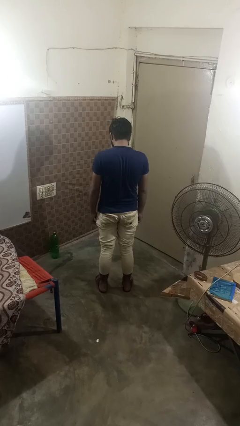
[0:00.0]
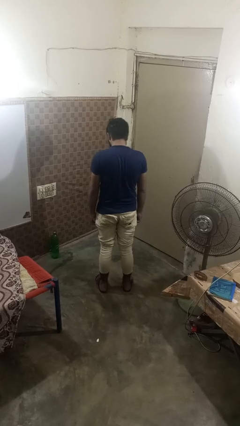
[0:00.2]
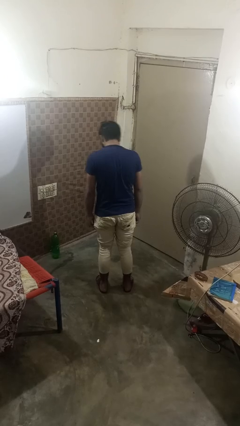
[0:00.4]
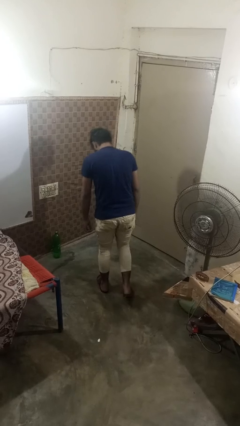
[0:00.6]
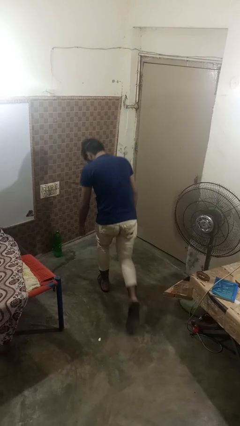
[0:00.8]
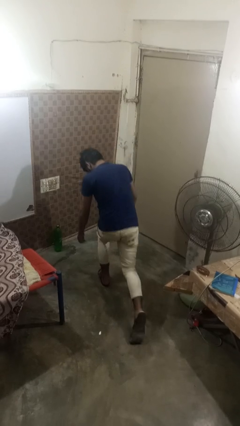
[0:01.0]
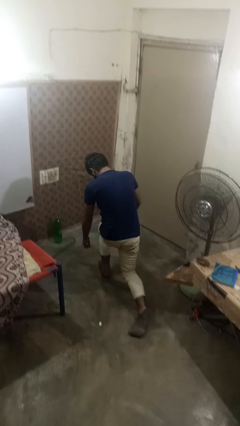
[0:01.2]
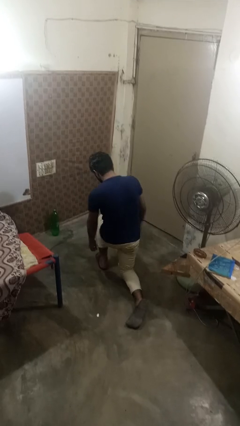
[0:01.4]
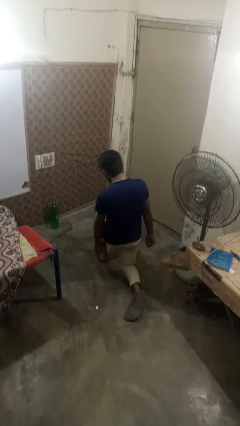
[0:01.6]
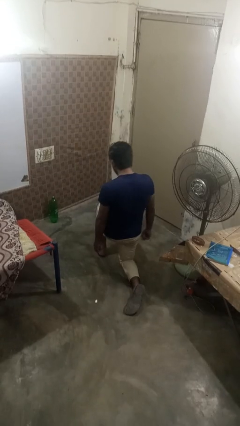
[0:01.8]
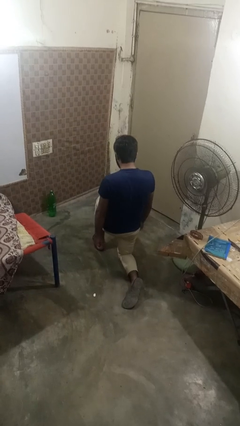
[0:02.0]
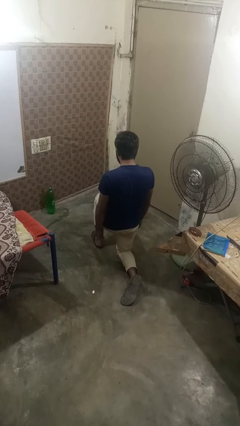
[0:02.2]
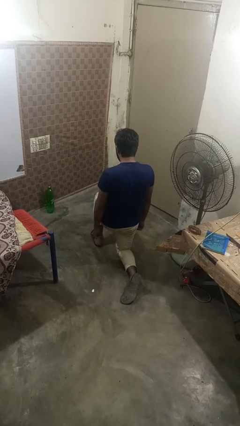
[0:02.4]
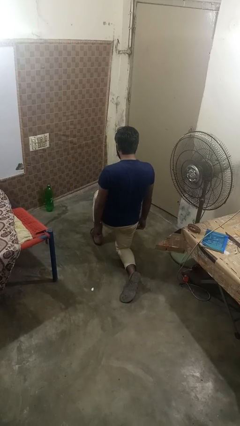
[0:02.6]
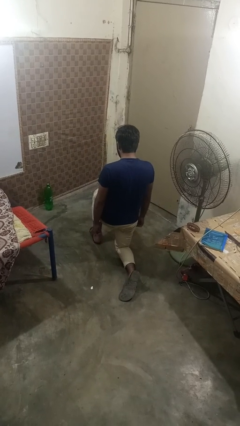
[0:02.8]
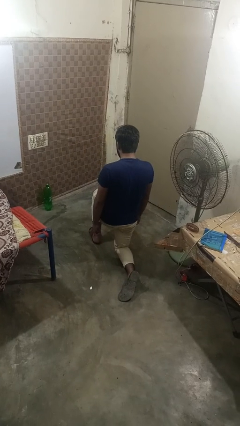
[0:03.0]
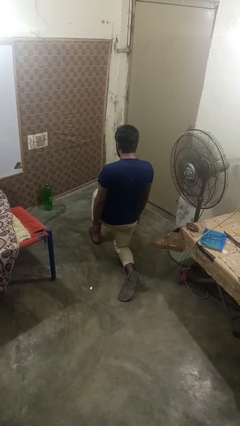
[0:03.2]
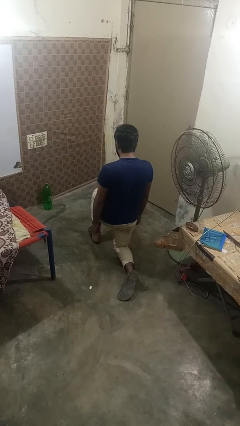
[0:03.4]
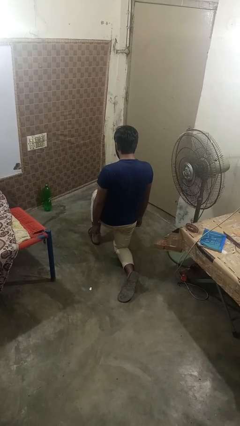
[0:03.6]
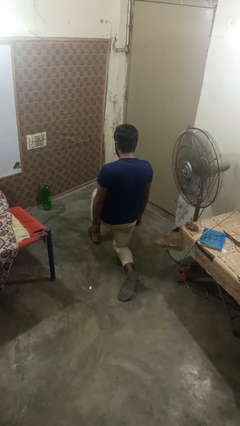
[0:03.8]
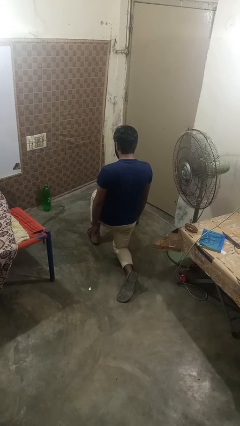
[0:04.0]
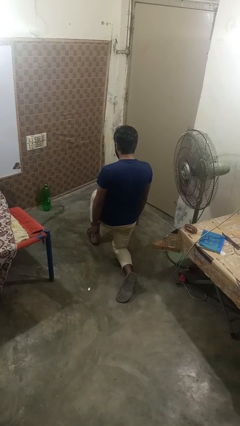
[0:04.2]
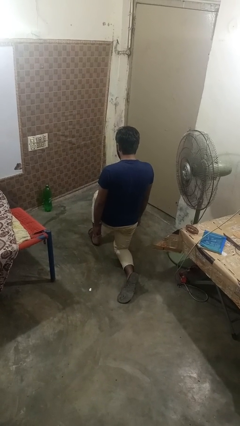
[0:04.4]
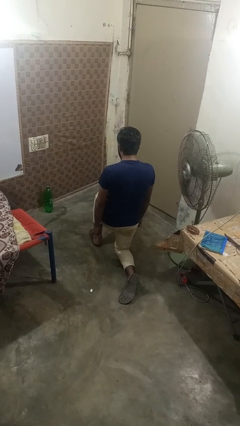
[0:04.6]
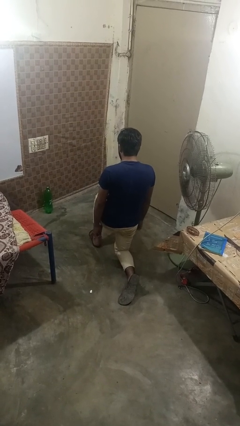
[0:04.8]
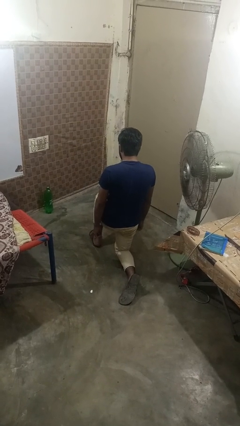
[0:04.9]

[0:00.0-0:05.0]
person kneels

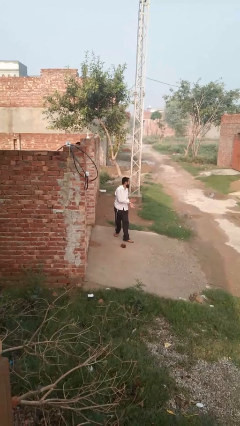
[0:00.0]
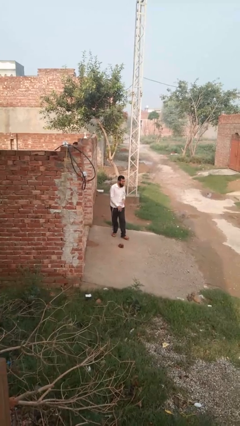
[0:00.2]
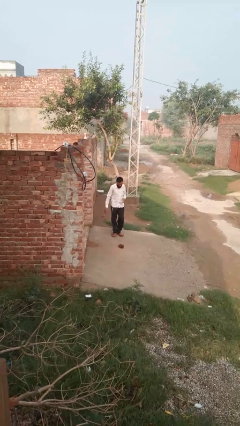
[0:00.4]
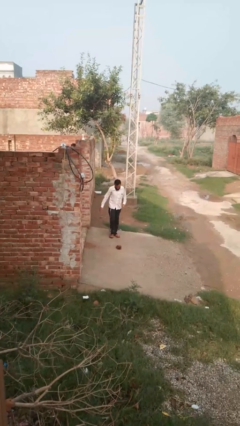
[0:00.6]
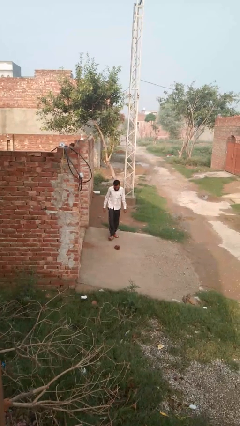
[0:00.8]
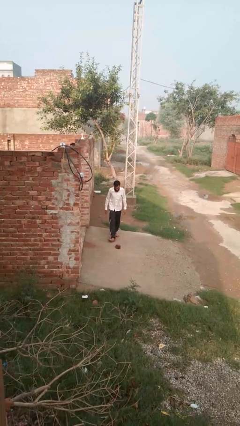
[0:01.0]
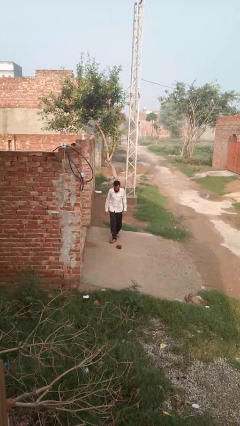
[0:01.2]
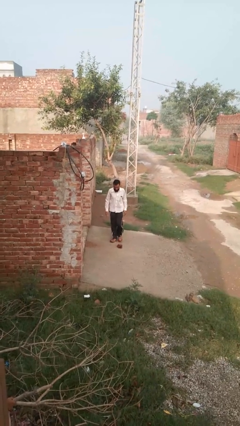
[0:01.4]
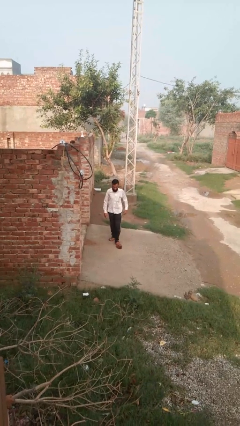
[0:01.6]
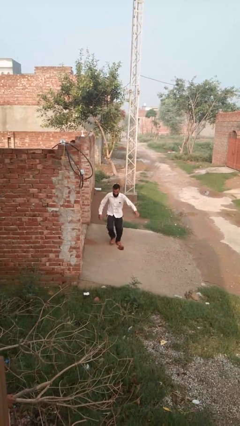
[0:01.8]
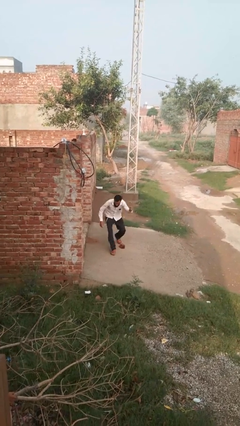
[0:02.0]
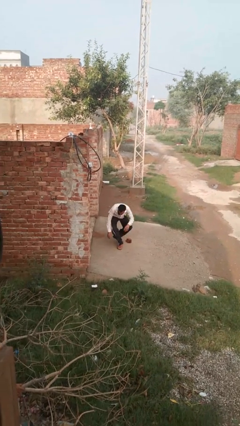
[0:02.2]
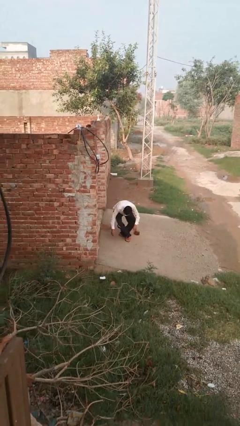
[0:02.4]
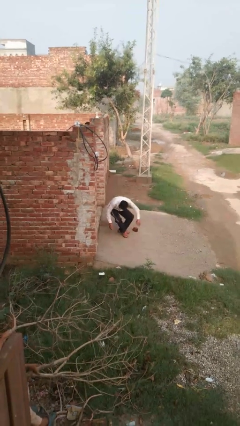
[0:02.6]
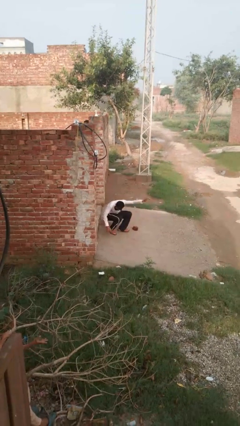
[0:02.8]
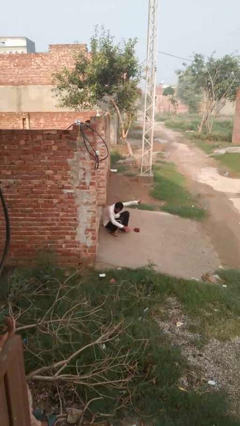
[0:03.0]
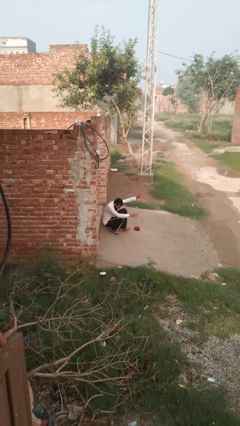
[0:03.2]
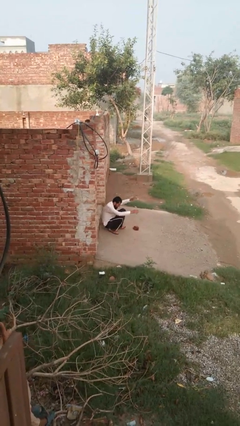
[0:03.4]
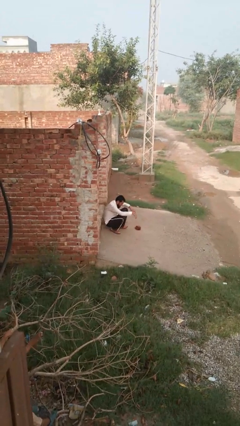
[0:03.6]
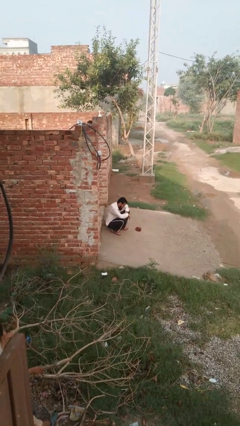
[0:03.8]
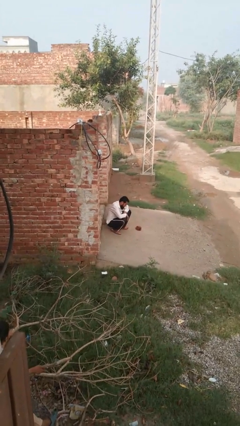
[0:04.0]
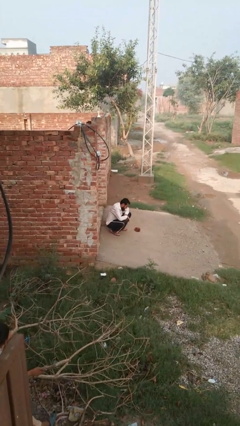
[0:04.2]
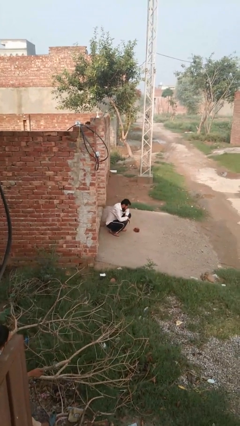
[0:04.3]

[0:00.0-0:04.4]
person trips on object on floor

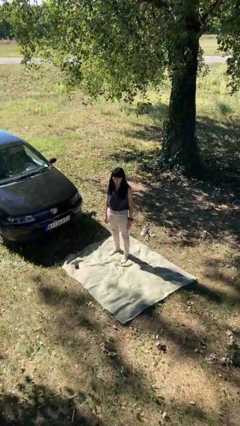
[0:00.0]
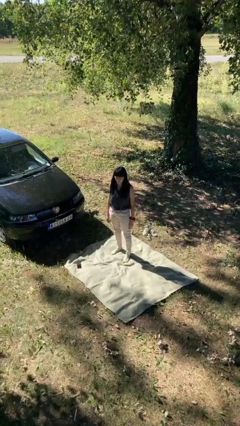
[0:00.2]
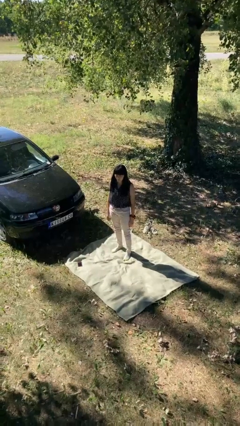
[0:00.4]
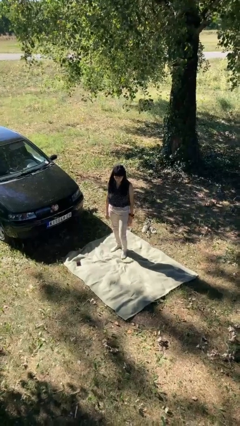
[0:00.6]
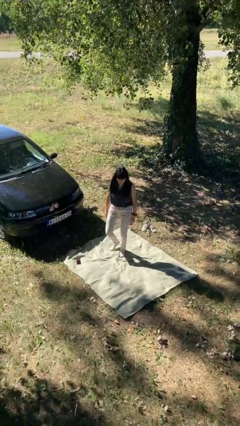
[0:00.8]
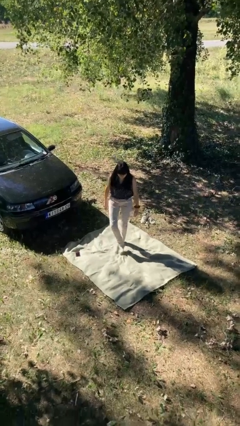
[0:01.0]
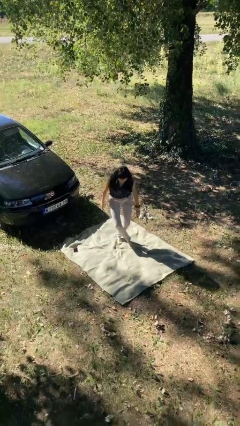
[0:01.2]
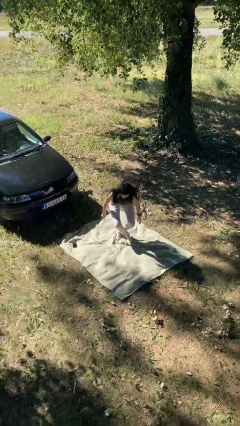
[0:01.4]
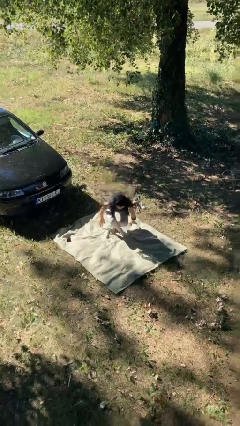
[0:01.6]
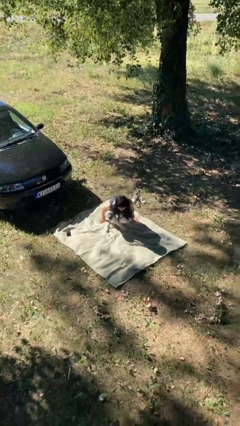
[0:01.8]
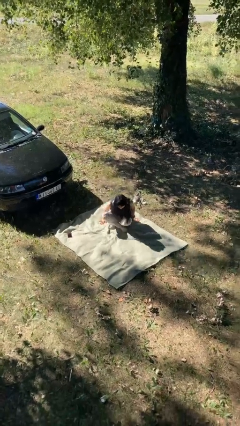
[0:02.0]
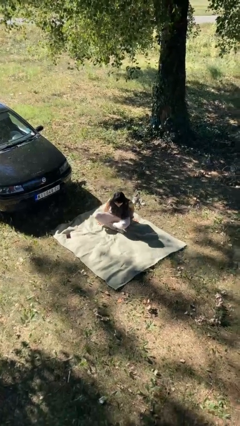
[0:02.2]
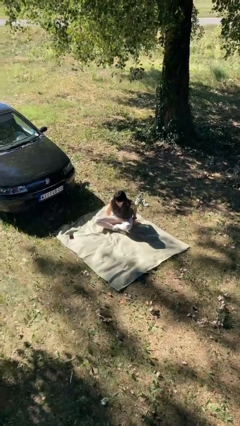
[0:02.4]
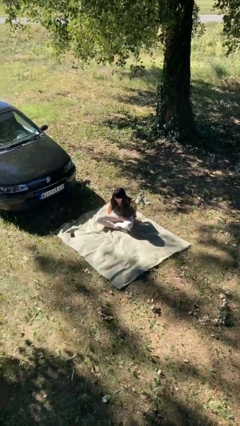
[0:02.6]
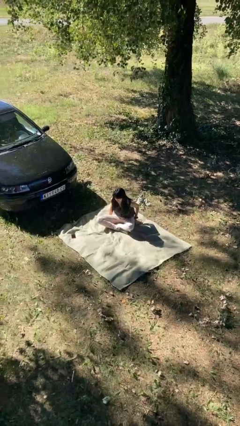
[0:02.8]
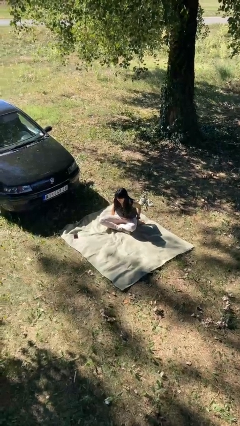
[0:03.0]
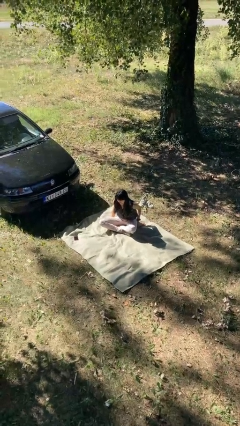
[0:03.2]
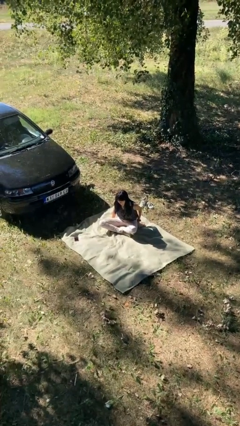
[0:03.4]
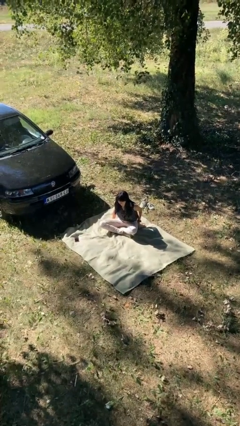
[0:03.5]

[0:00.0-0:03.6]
person sits crisscross

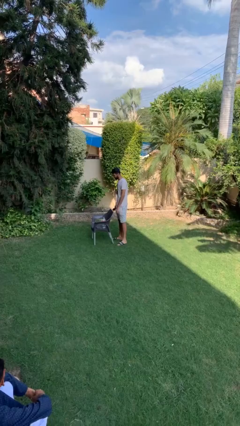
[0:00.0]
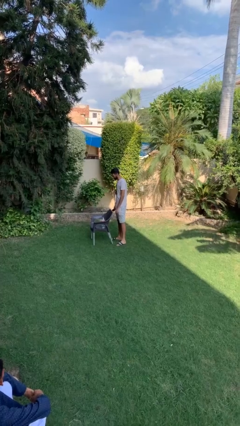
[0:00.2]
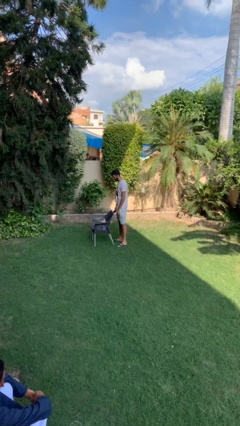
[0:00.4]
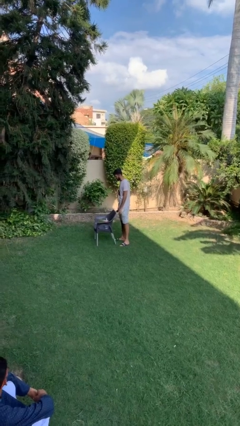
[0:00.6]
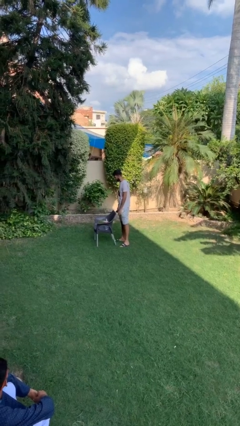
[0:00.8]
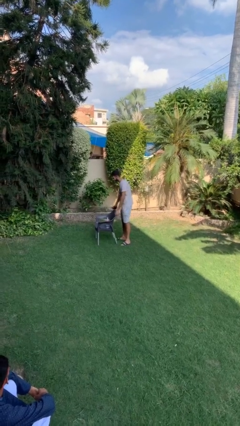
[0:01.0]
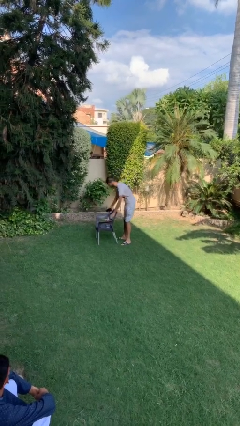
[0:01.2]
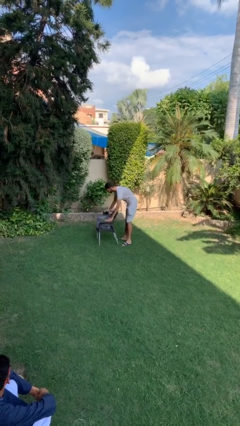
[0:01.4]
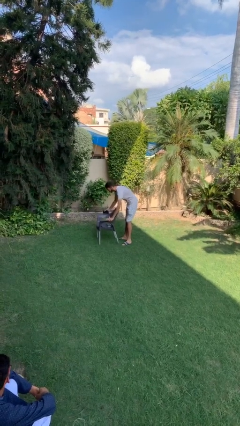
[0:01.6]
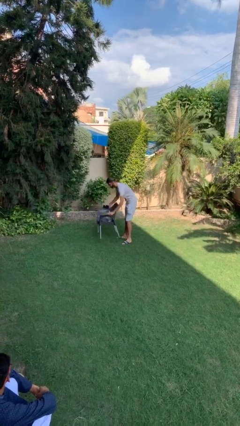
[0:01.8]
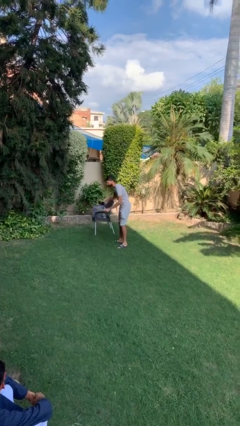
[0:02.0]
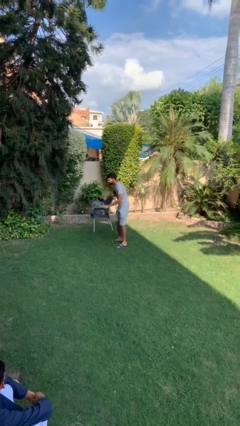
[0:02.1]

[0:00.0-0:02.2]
person picks up object from floor

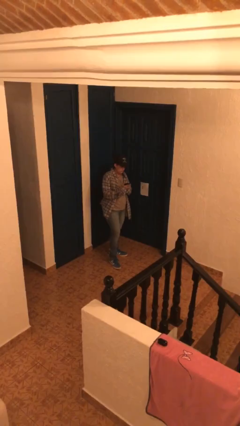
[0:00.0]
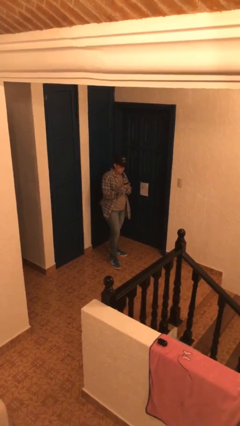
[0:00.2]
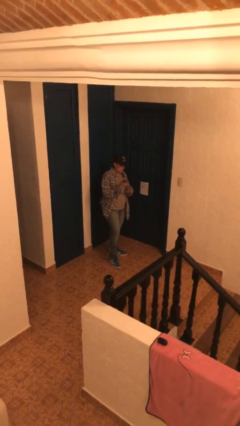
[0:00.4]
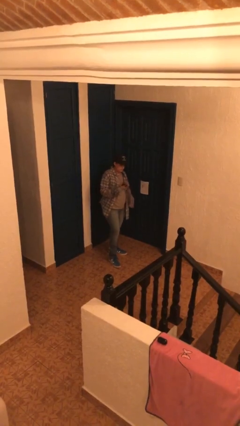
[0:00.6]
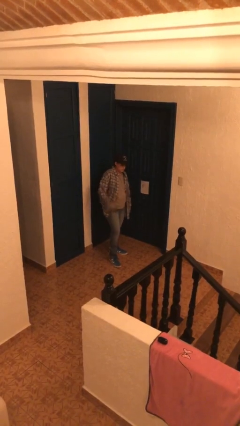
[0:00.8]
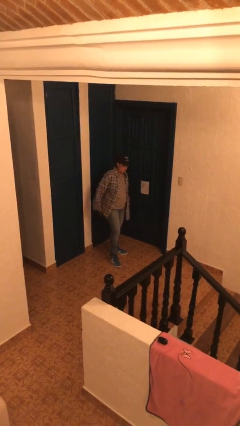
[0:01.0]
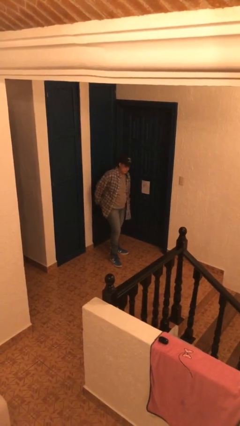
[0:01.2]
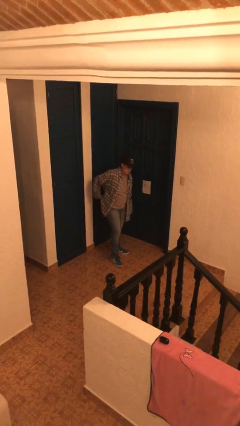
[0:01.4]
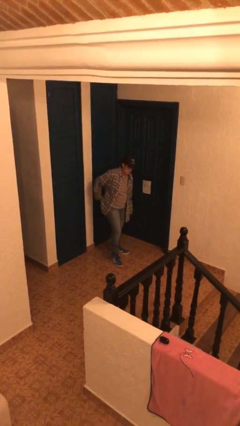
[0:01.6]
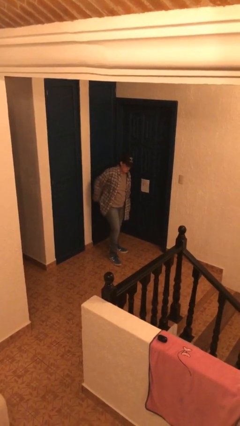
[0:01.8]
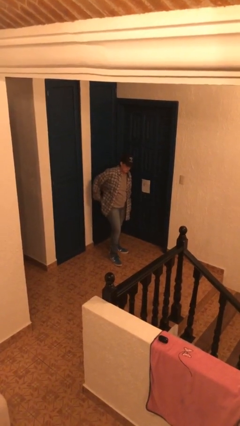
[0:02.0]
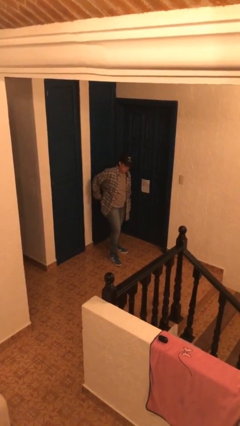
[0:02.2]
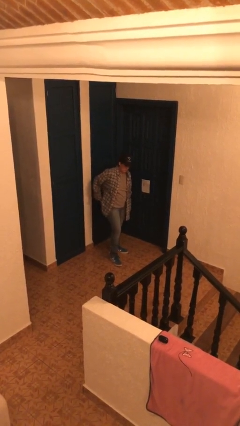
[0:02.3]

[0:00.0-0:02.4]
person puts phone into pocket
